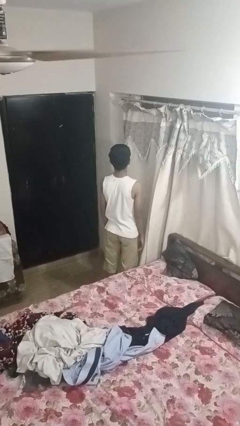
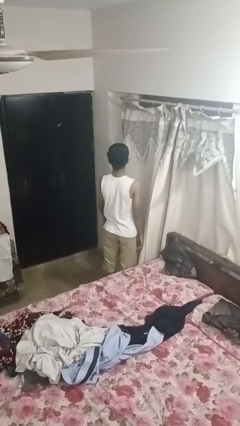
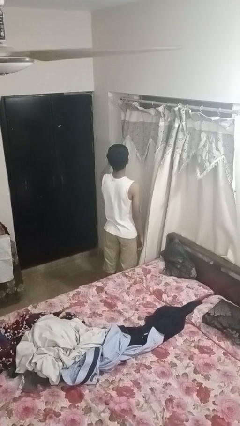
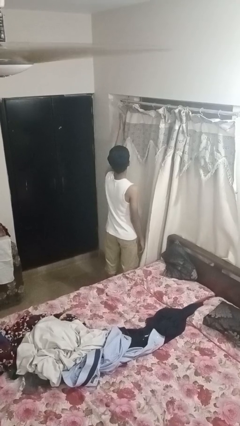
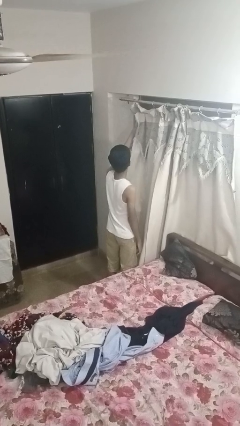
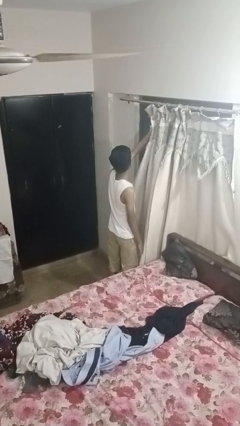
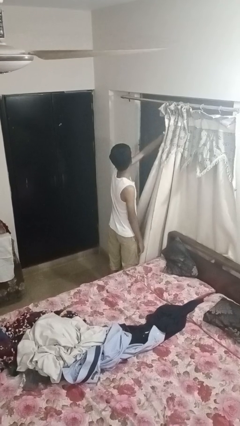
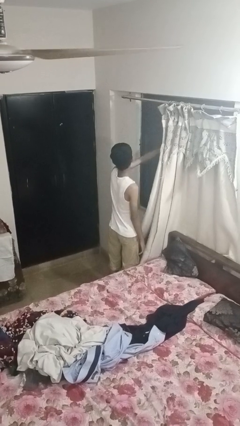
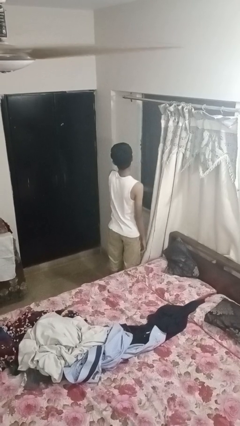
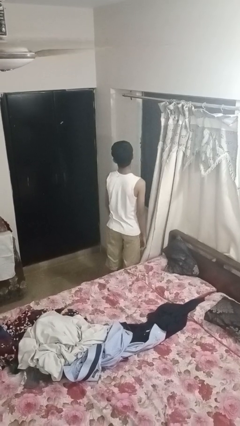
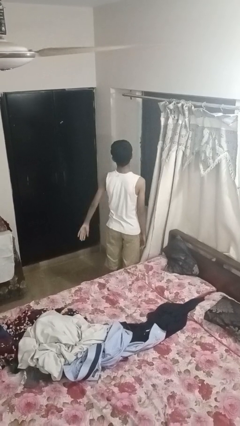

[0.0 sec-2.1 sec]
person opens curtains

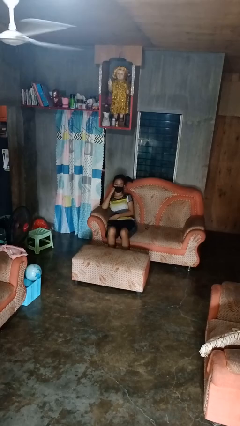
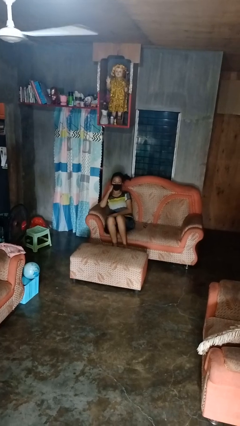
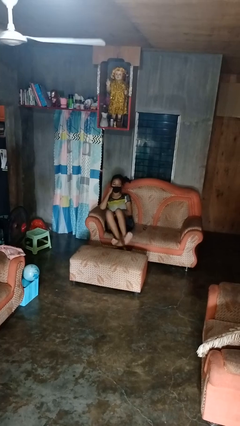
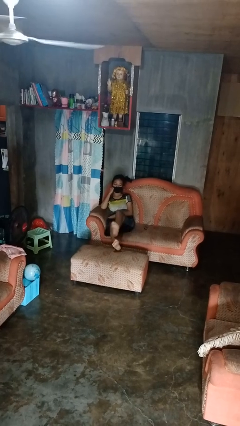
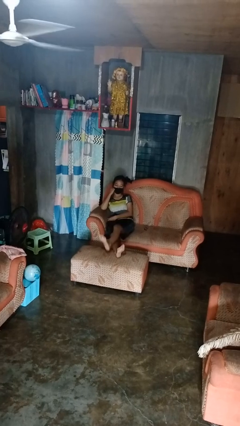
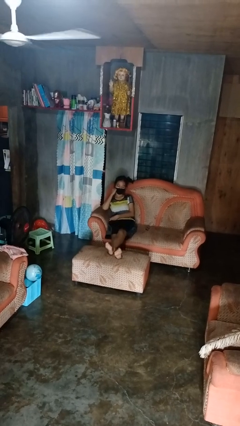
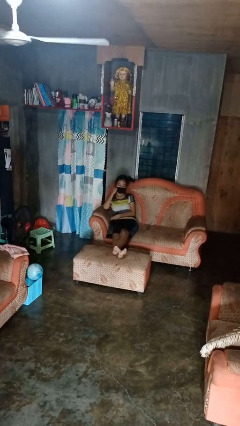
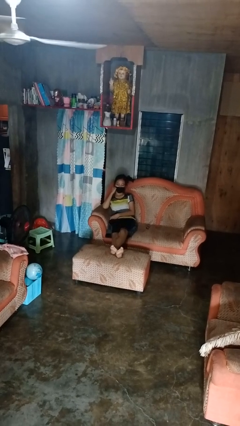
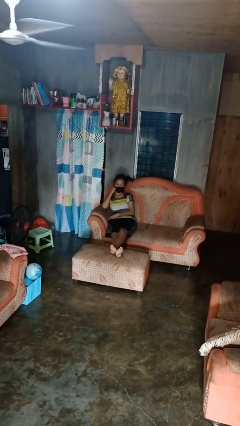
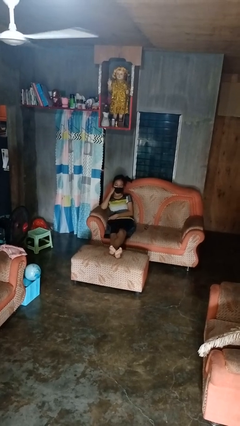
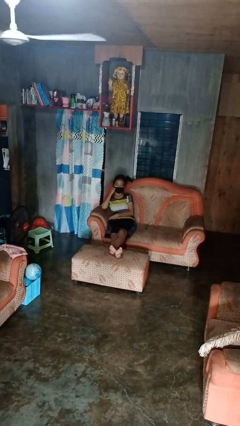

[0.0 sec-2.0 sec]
person puts feet up

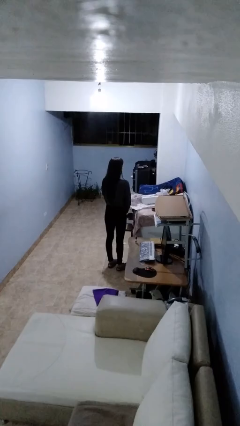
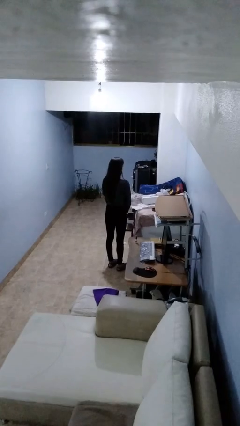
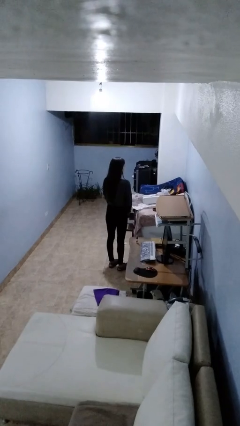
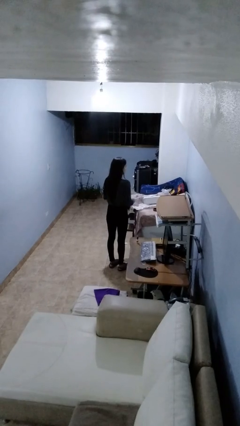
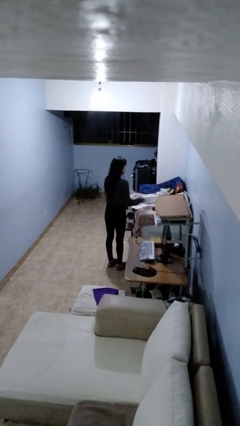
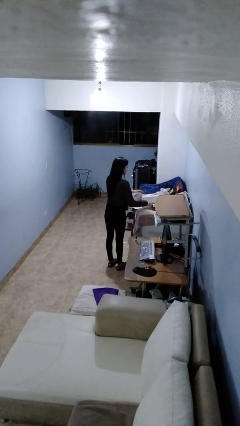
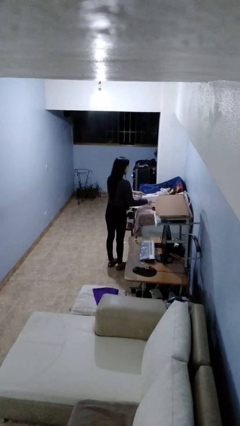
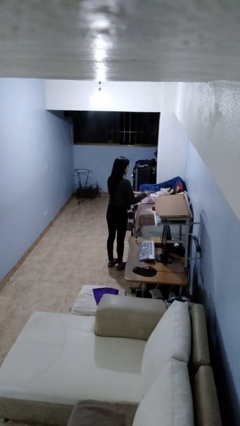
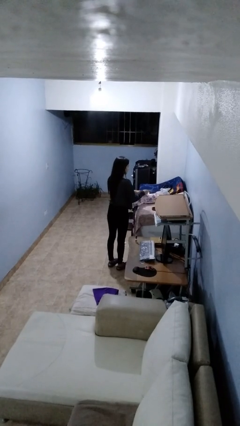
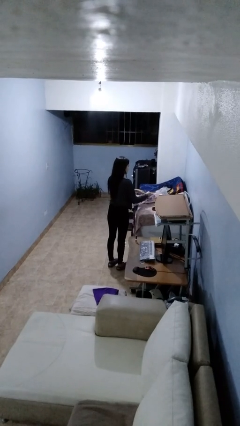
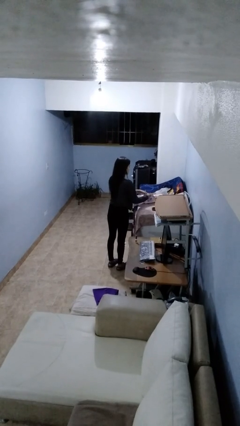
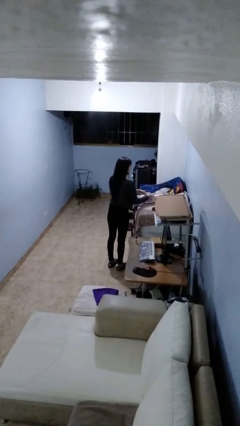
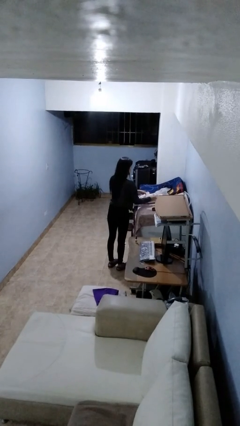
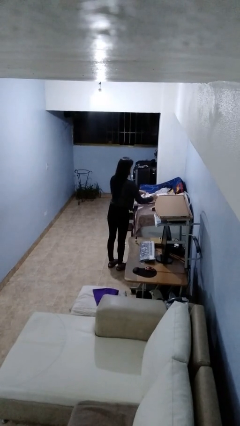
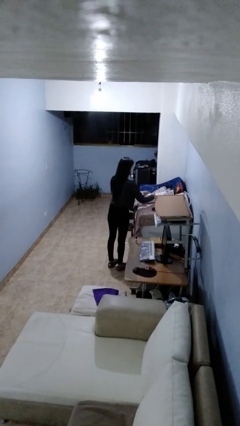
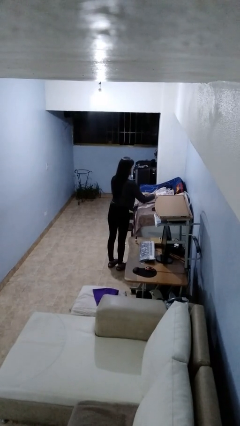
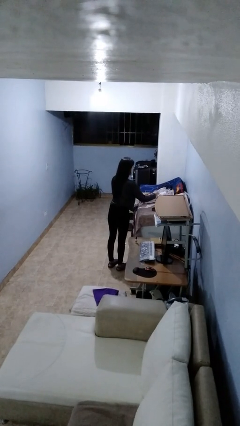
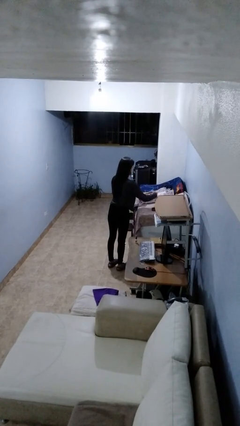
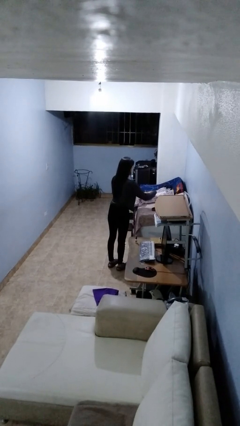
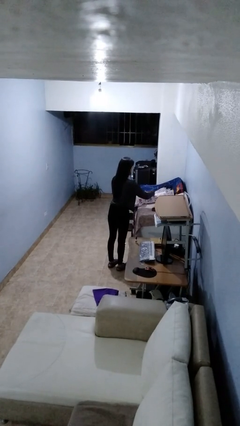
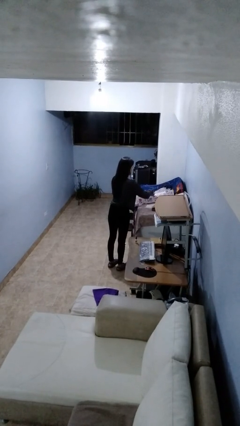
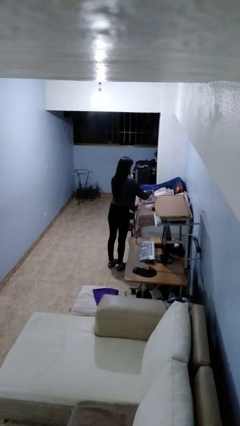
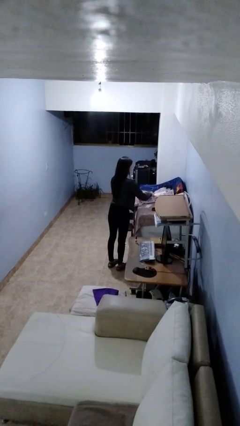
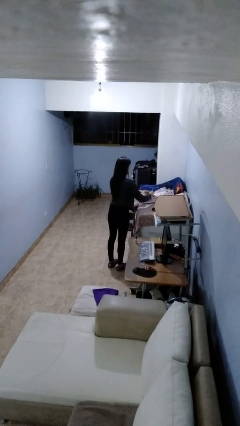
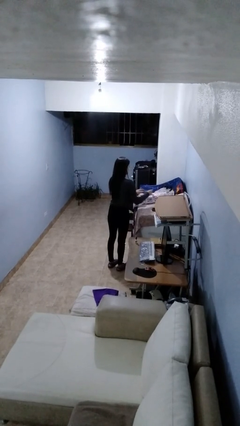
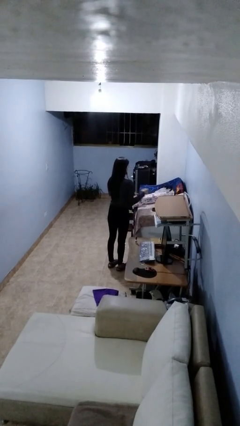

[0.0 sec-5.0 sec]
person wraps box

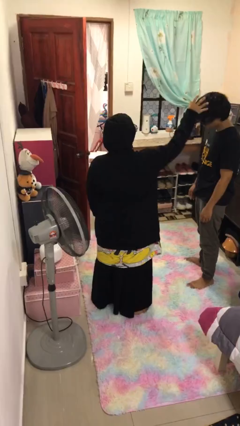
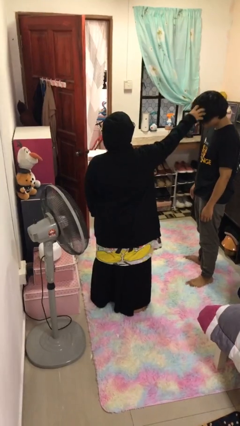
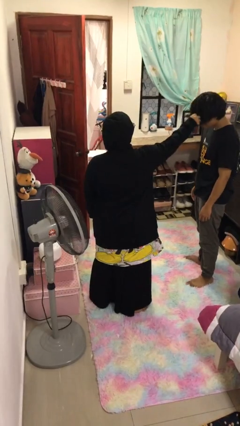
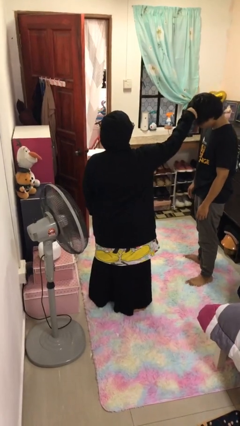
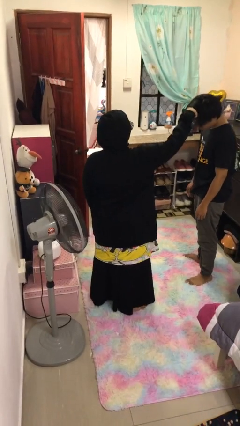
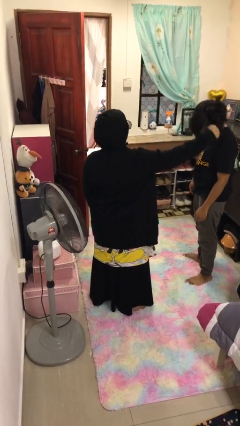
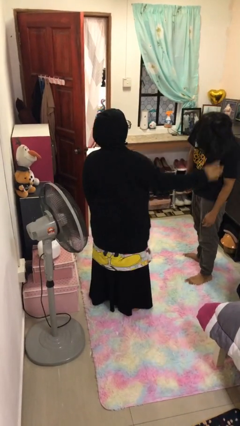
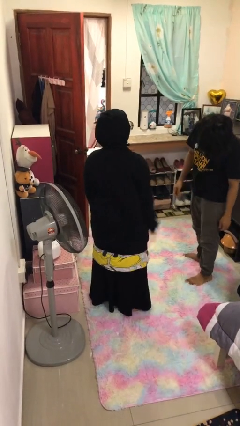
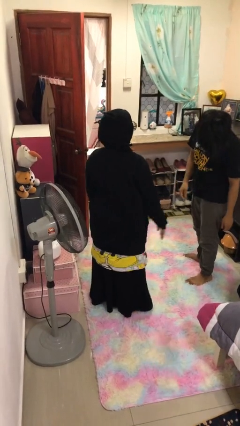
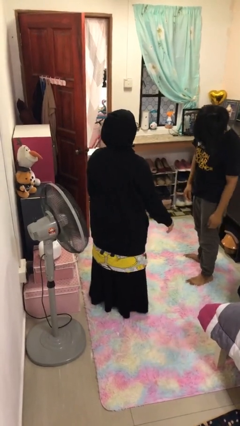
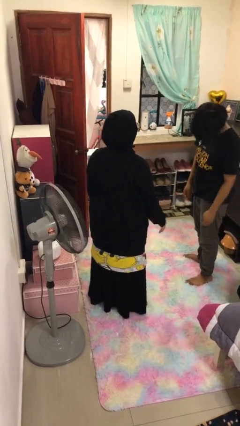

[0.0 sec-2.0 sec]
person grabs person by hair

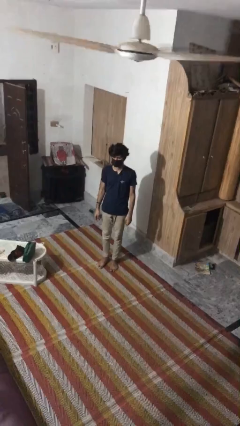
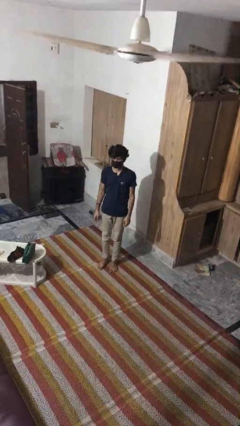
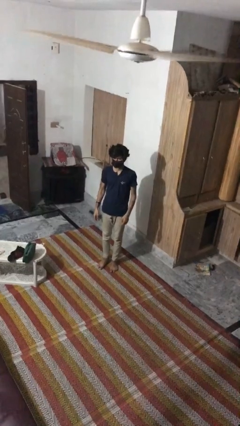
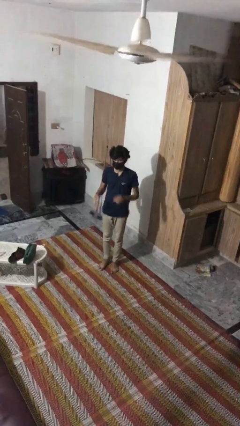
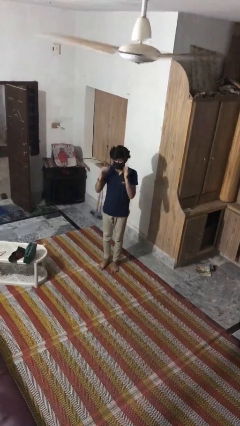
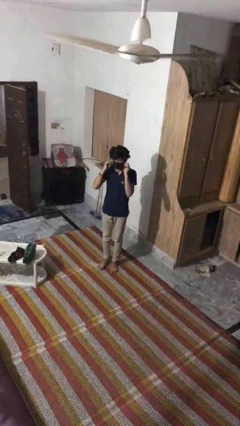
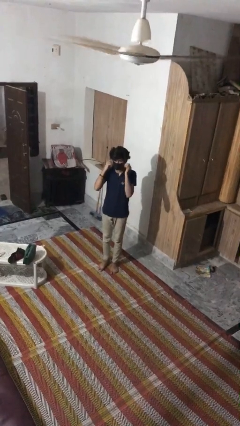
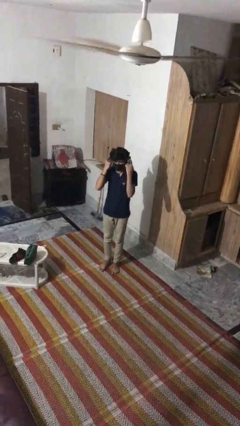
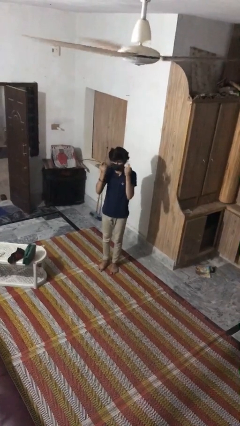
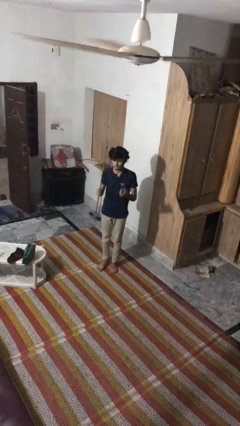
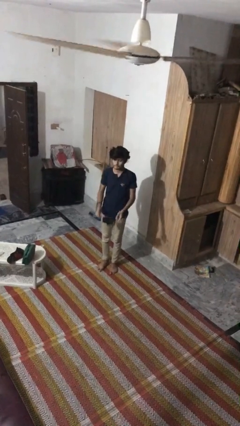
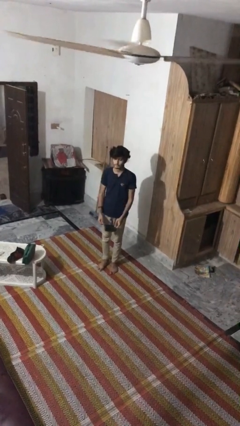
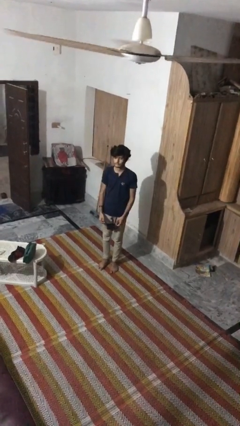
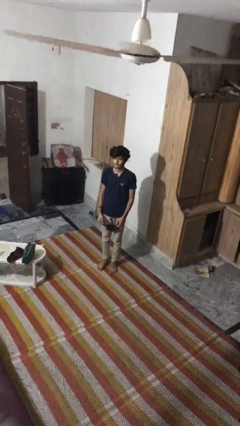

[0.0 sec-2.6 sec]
person takes off facemask

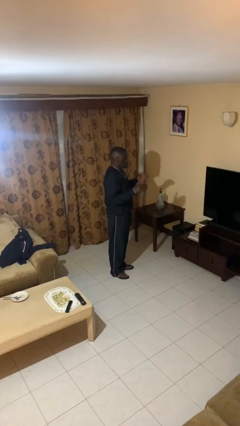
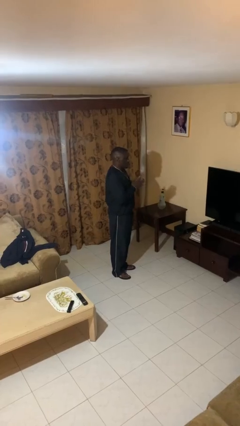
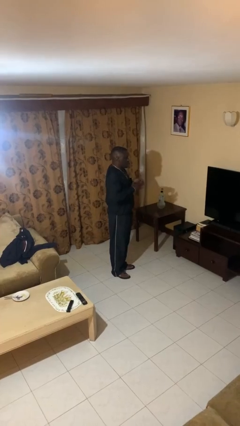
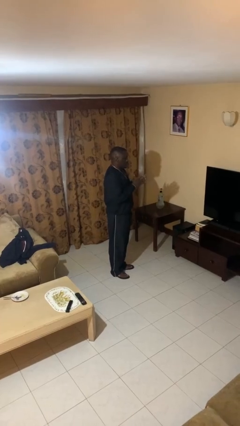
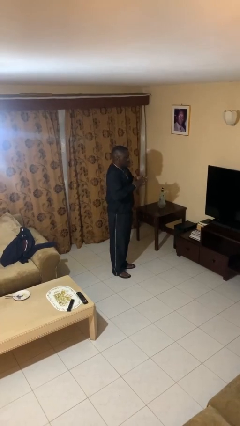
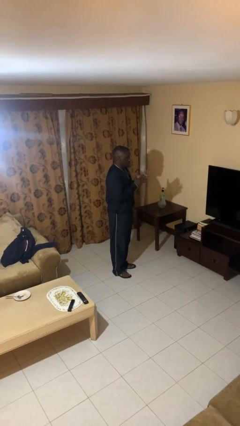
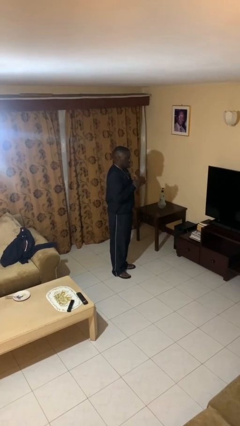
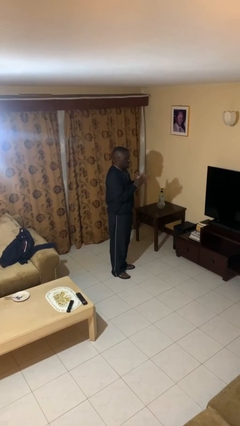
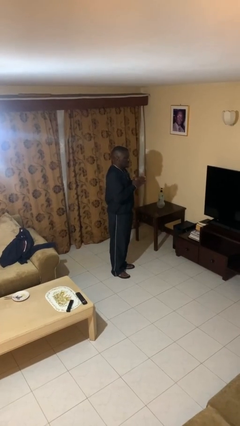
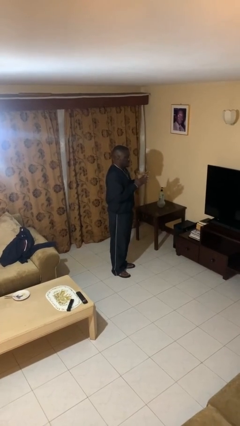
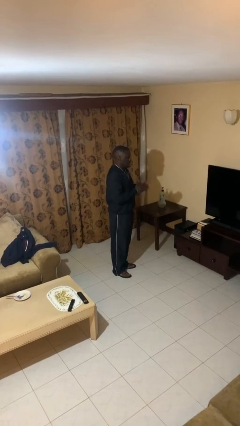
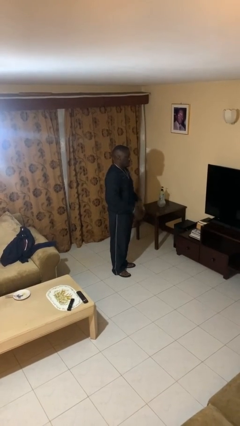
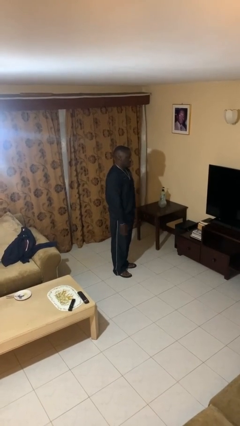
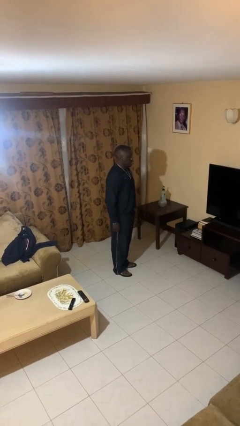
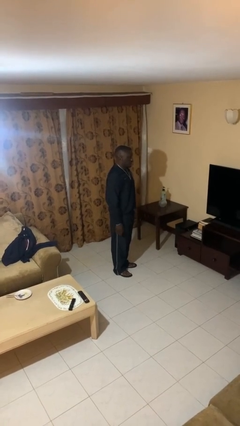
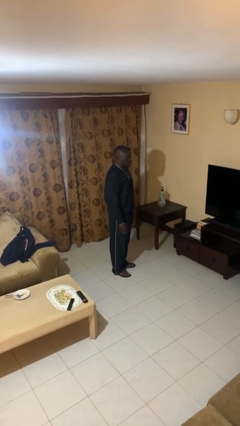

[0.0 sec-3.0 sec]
person claps hands

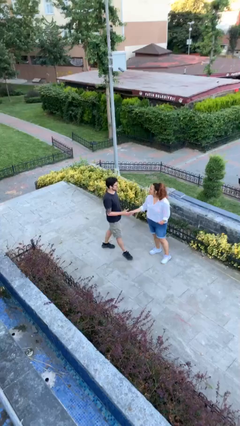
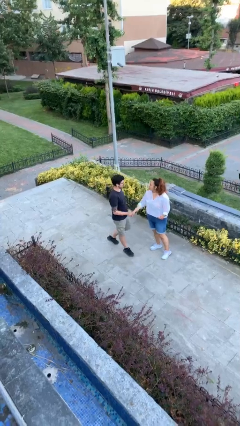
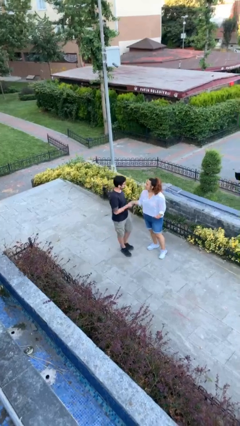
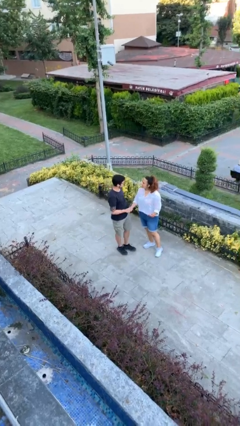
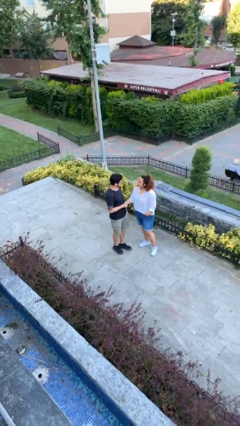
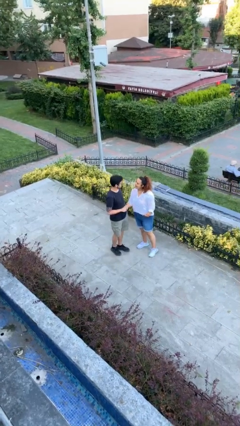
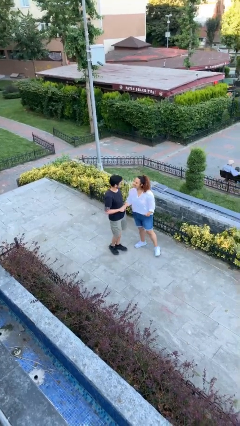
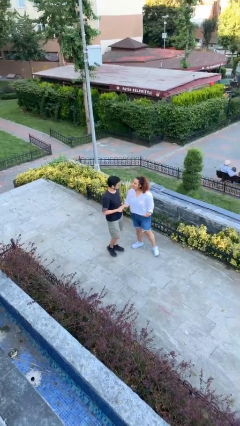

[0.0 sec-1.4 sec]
person shakes hand
